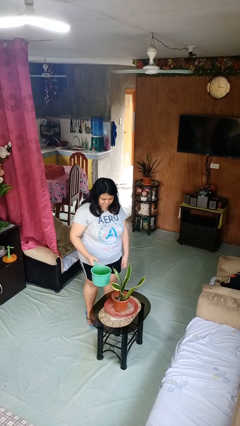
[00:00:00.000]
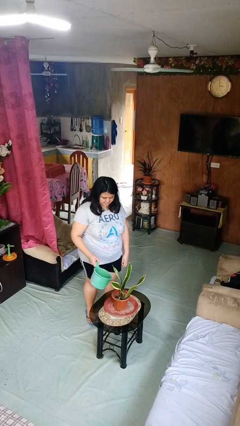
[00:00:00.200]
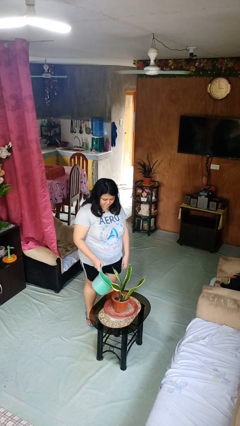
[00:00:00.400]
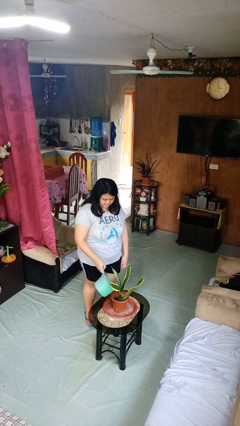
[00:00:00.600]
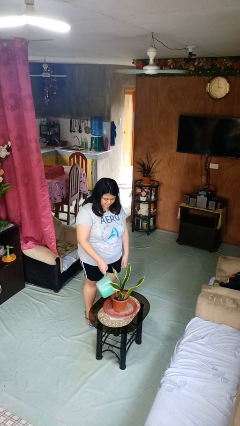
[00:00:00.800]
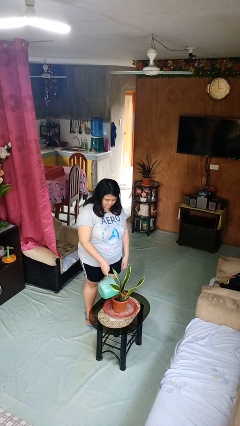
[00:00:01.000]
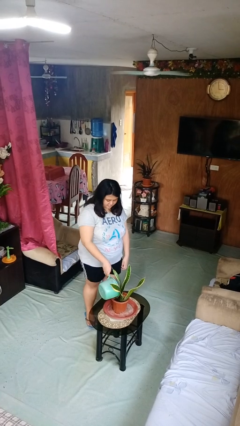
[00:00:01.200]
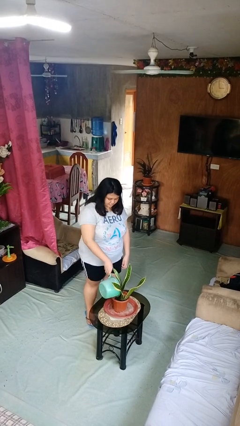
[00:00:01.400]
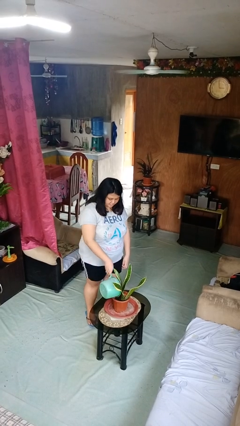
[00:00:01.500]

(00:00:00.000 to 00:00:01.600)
person waters houseplant

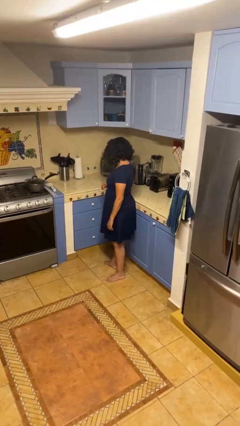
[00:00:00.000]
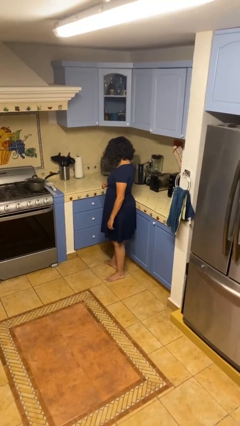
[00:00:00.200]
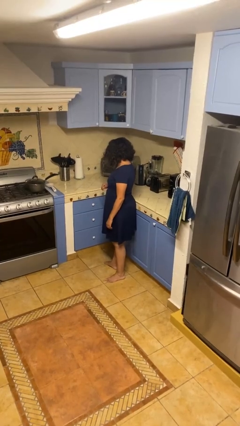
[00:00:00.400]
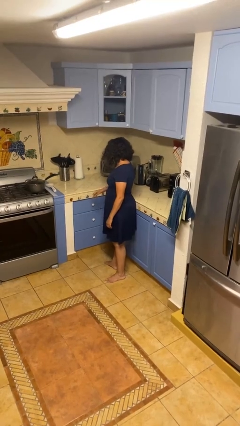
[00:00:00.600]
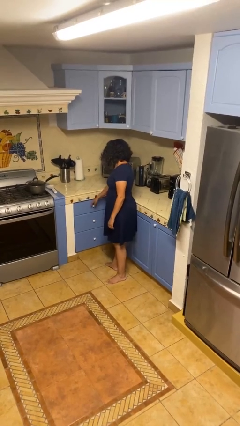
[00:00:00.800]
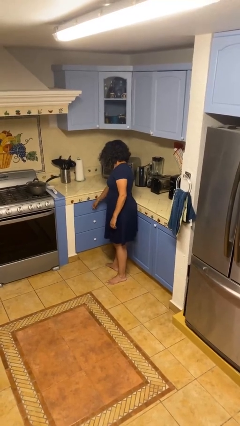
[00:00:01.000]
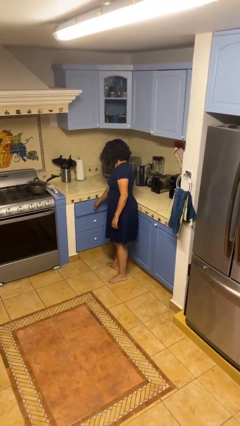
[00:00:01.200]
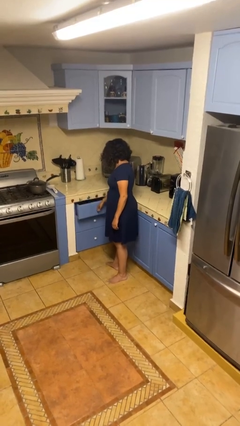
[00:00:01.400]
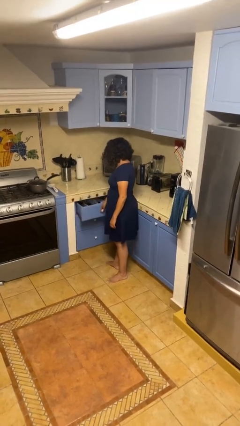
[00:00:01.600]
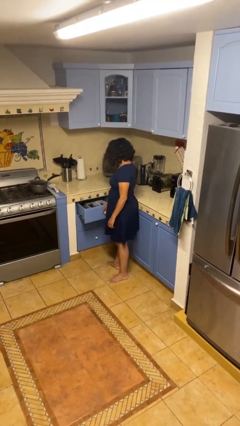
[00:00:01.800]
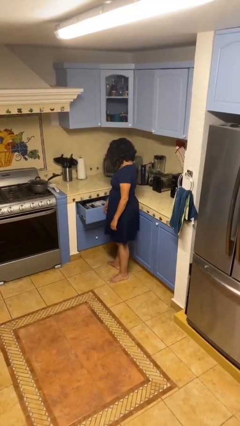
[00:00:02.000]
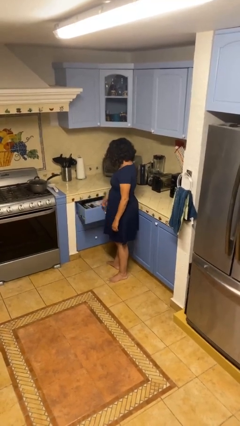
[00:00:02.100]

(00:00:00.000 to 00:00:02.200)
person opens kitchen drawer

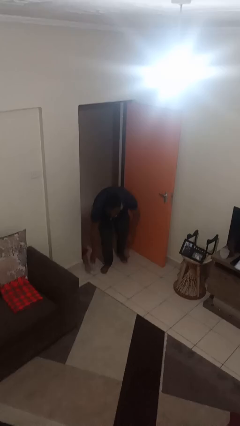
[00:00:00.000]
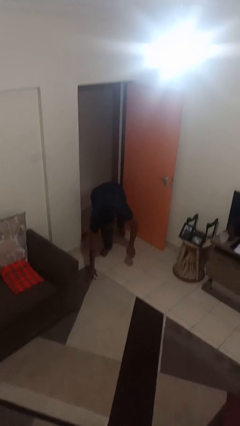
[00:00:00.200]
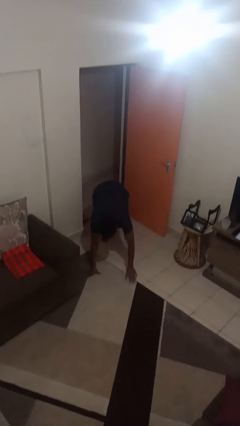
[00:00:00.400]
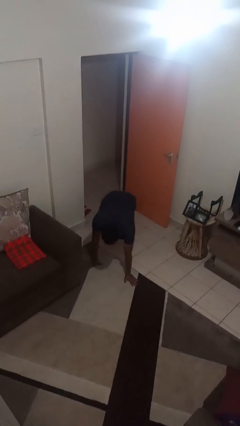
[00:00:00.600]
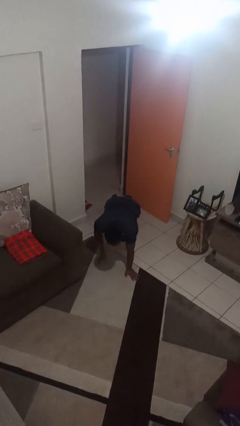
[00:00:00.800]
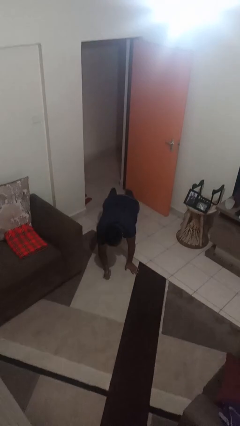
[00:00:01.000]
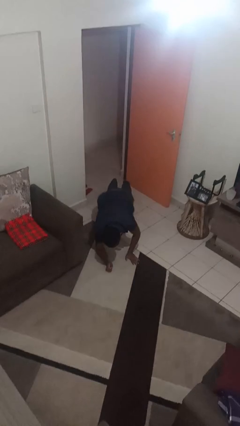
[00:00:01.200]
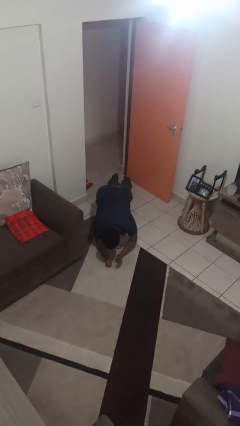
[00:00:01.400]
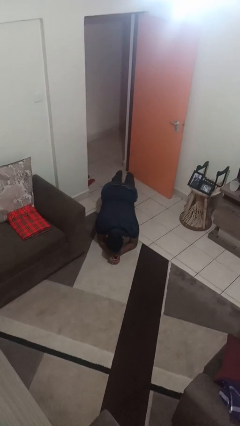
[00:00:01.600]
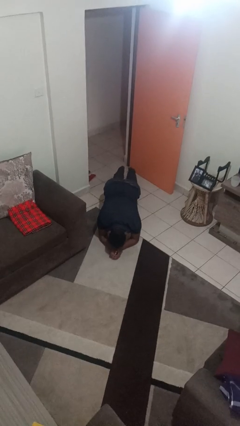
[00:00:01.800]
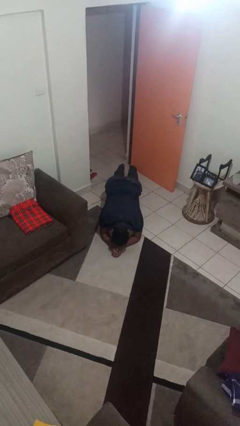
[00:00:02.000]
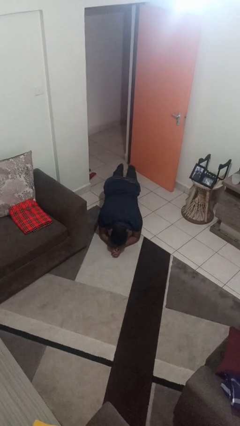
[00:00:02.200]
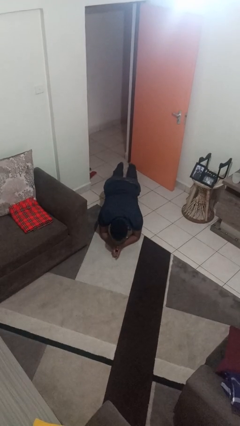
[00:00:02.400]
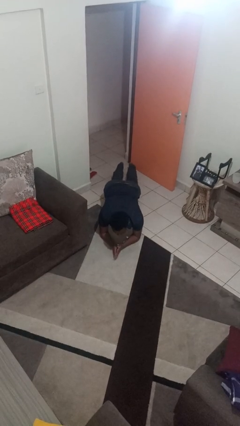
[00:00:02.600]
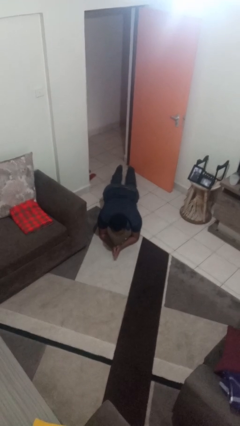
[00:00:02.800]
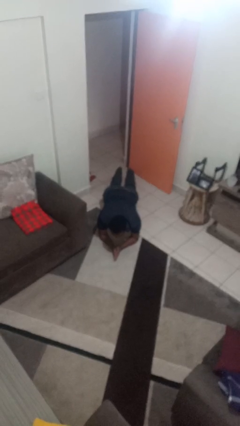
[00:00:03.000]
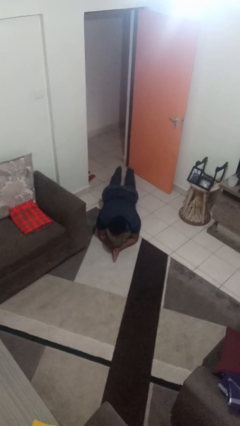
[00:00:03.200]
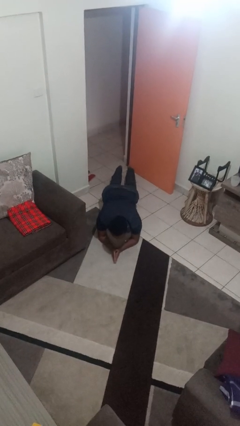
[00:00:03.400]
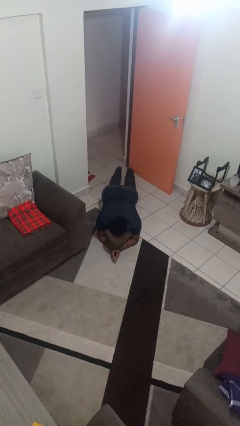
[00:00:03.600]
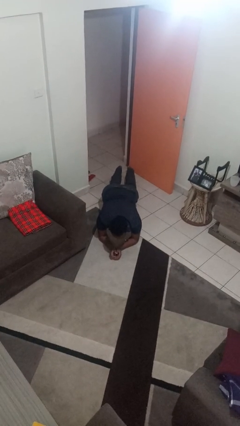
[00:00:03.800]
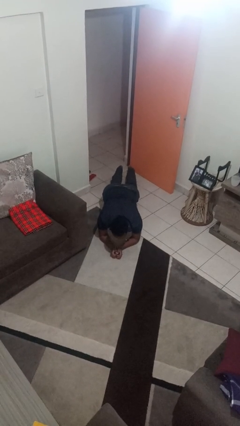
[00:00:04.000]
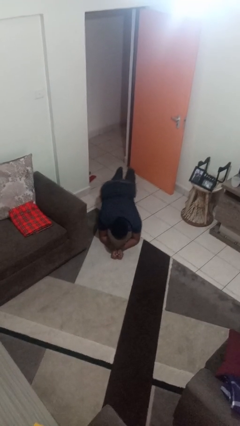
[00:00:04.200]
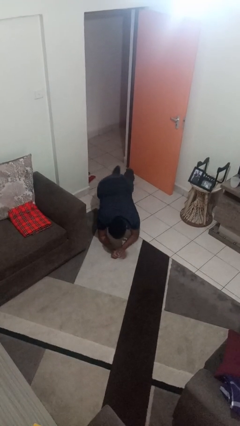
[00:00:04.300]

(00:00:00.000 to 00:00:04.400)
person exercises with plank

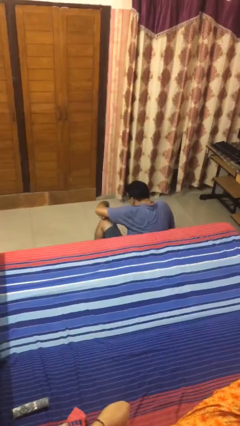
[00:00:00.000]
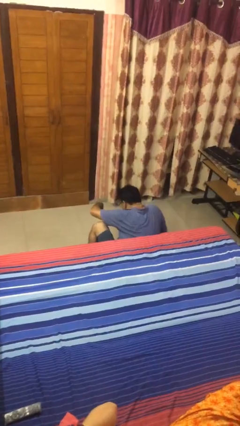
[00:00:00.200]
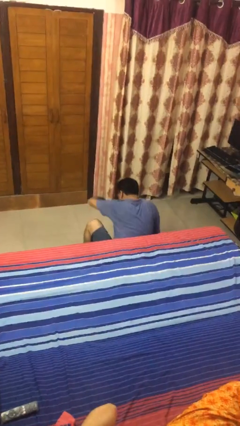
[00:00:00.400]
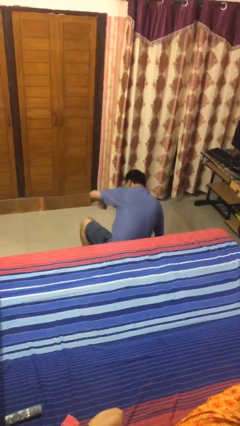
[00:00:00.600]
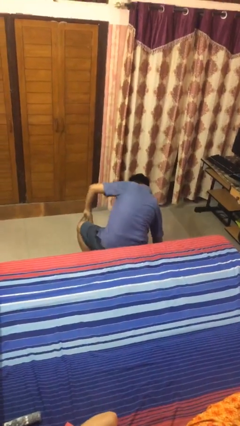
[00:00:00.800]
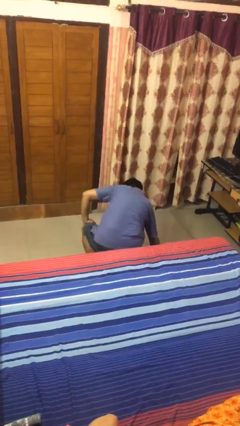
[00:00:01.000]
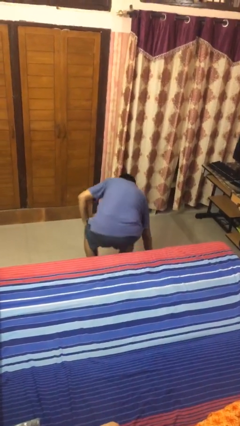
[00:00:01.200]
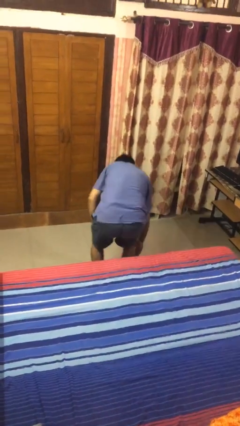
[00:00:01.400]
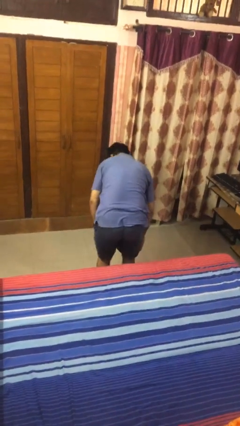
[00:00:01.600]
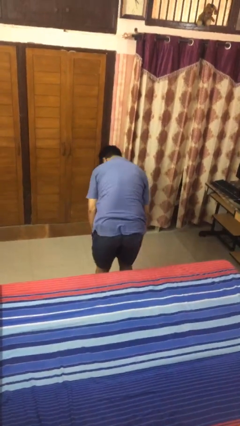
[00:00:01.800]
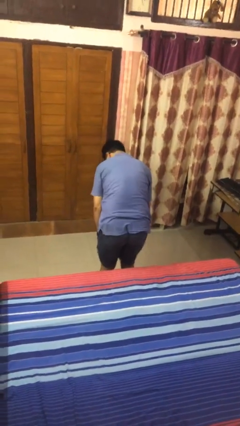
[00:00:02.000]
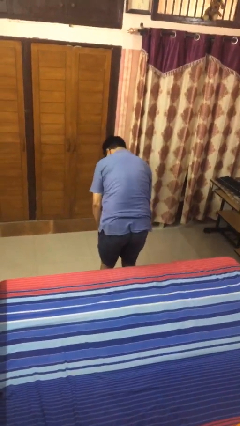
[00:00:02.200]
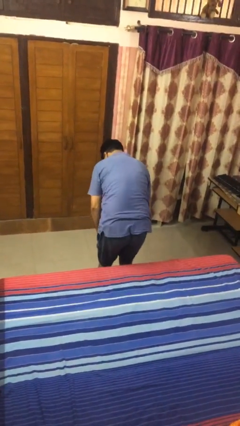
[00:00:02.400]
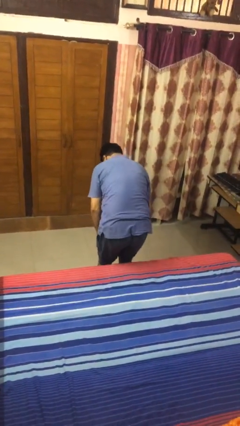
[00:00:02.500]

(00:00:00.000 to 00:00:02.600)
person stands up from floor

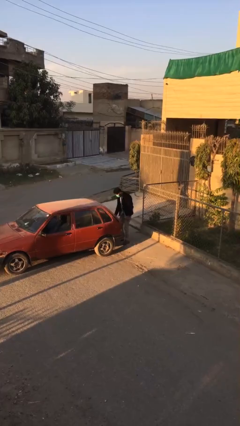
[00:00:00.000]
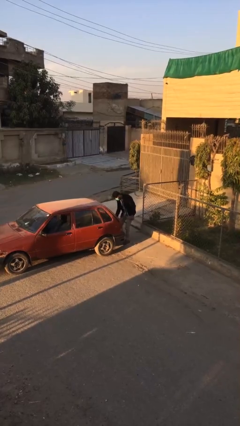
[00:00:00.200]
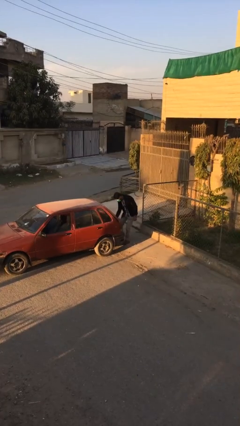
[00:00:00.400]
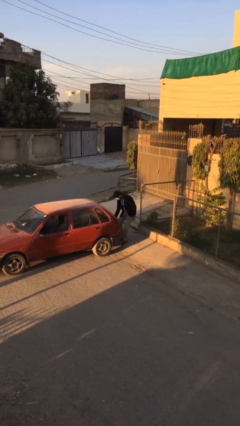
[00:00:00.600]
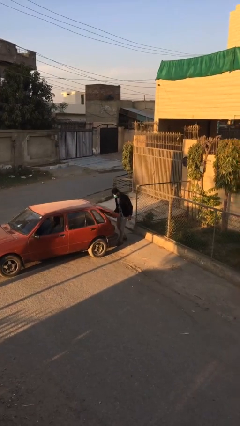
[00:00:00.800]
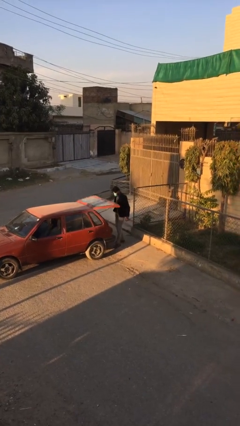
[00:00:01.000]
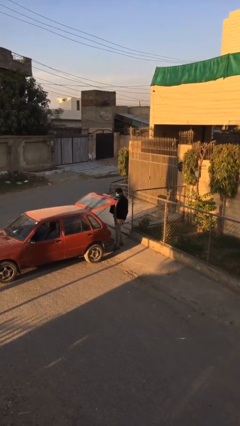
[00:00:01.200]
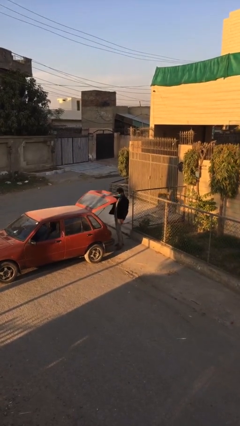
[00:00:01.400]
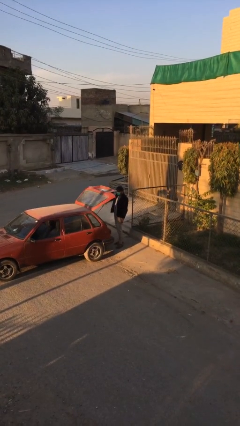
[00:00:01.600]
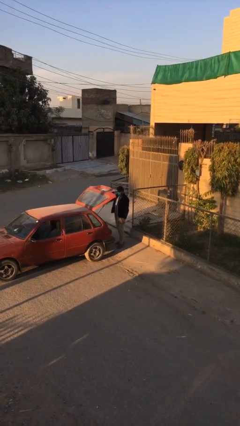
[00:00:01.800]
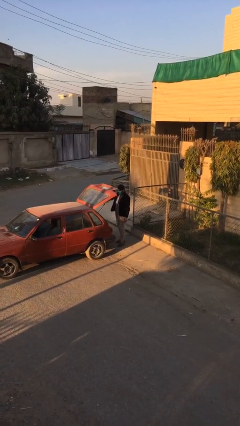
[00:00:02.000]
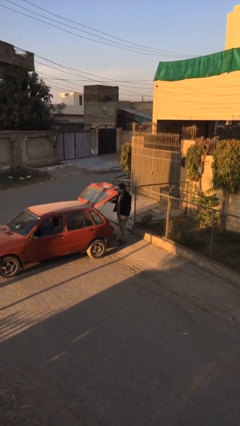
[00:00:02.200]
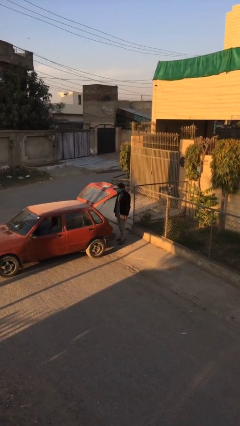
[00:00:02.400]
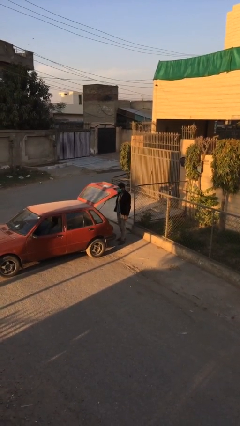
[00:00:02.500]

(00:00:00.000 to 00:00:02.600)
person opens car trunk

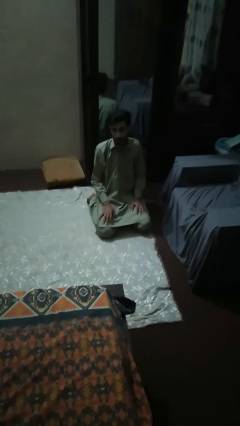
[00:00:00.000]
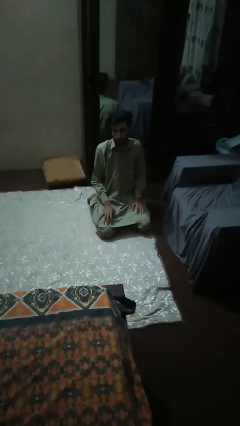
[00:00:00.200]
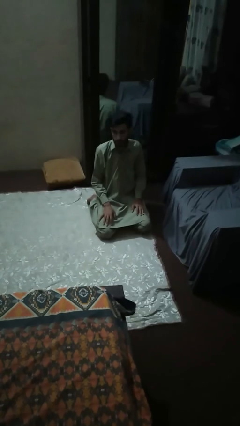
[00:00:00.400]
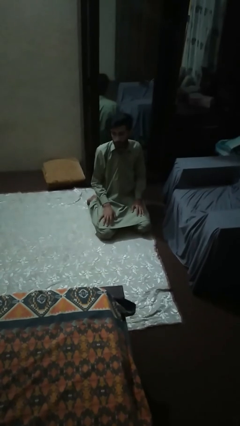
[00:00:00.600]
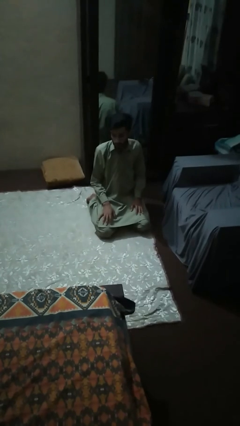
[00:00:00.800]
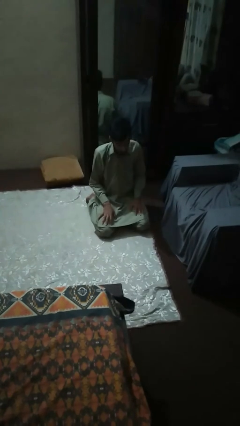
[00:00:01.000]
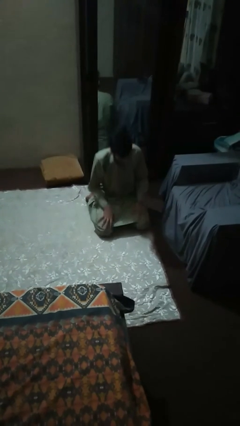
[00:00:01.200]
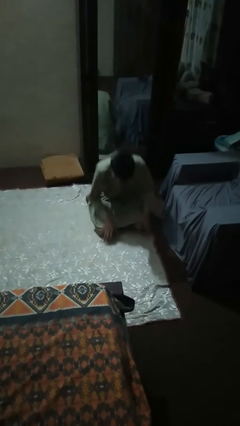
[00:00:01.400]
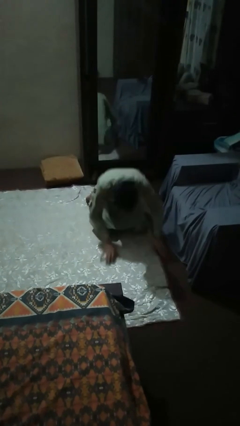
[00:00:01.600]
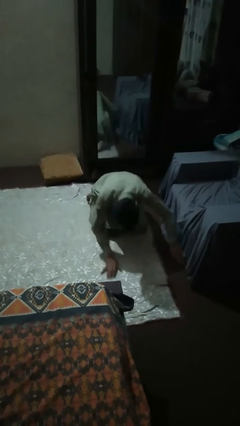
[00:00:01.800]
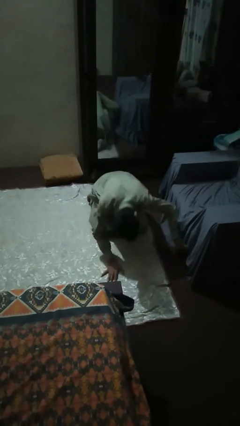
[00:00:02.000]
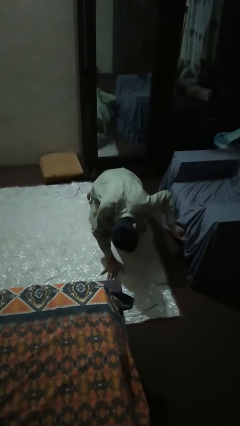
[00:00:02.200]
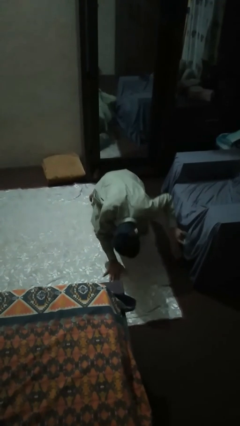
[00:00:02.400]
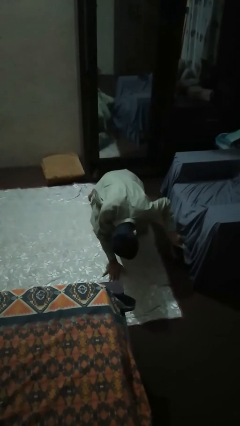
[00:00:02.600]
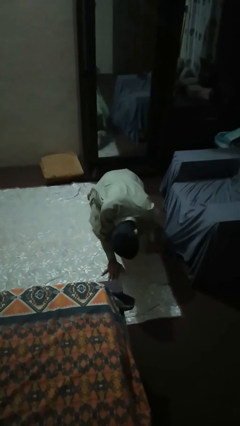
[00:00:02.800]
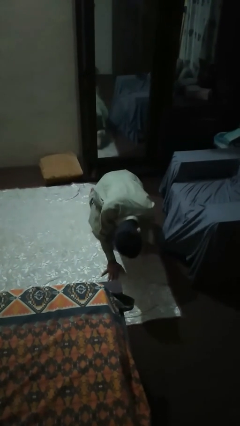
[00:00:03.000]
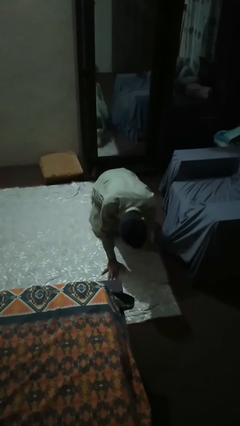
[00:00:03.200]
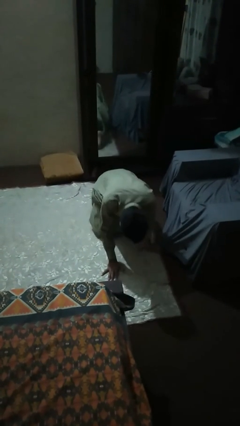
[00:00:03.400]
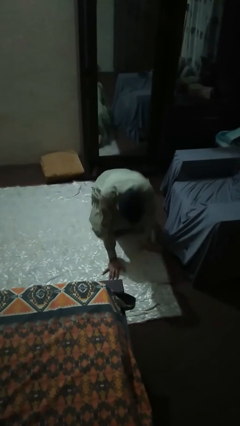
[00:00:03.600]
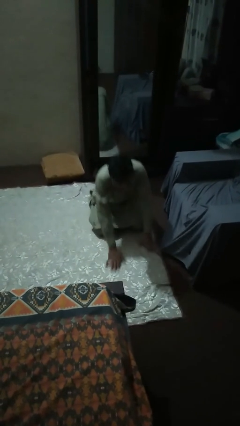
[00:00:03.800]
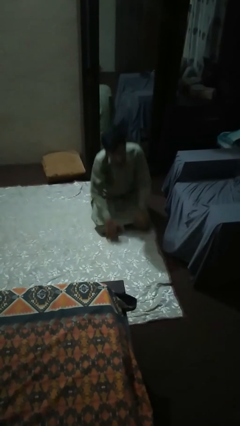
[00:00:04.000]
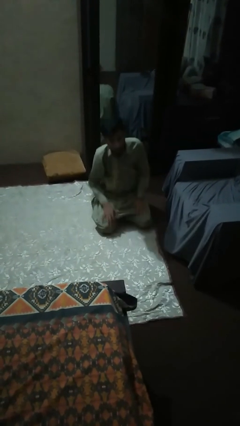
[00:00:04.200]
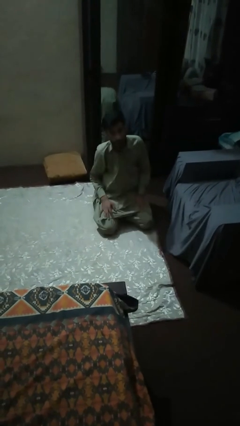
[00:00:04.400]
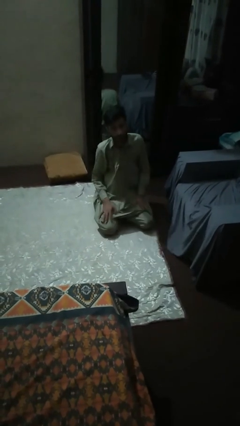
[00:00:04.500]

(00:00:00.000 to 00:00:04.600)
person searches under couch
